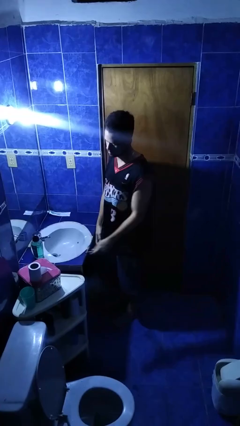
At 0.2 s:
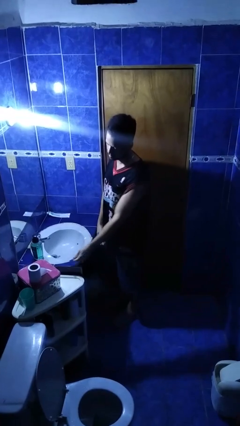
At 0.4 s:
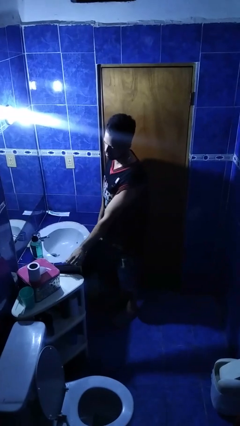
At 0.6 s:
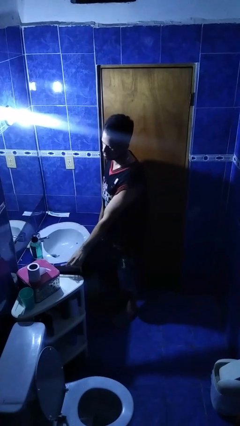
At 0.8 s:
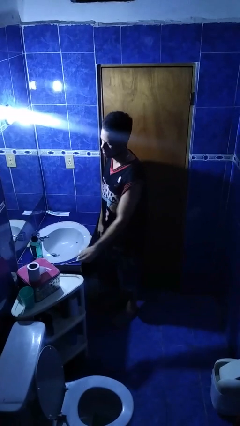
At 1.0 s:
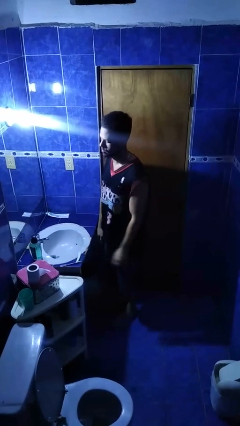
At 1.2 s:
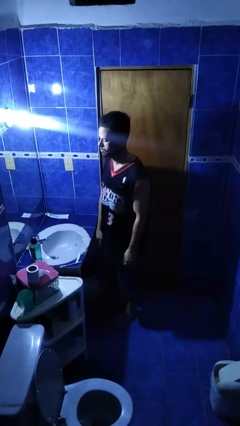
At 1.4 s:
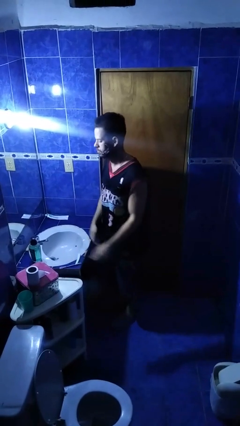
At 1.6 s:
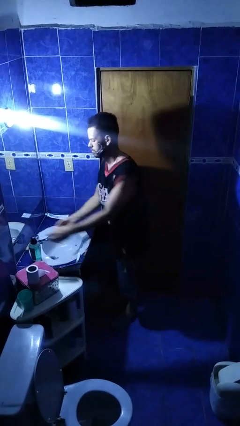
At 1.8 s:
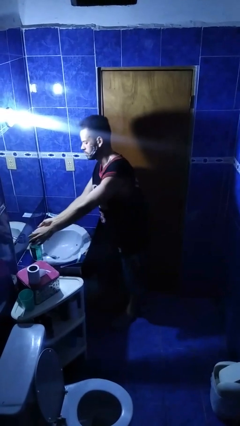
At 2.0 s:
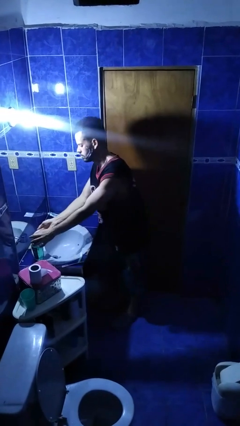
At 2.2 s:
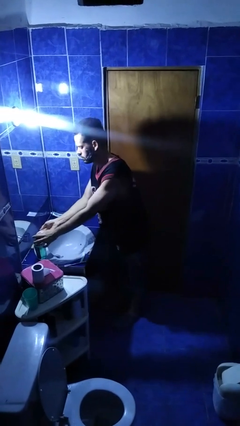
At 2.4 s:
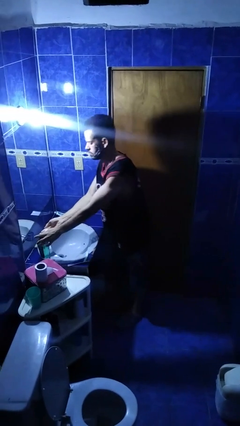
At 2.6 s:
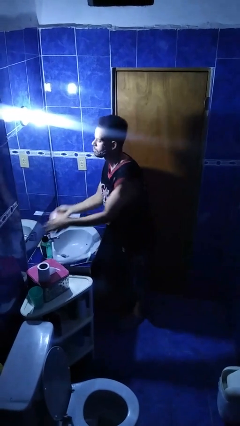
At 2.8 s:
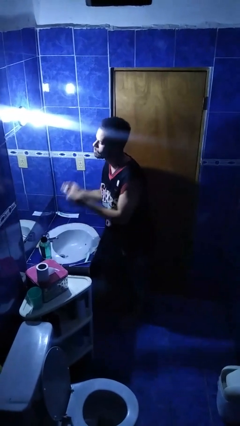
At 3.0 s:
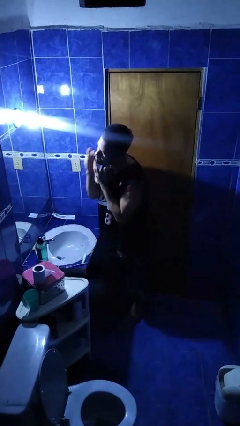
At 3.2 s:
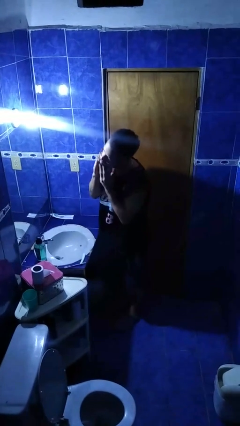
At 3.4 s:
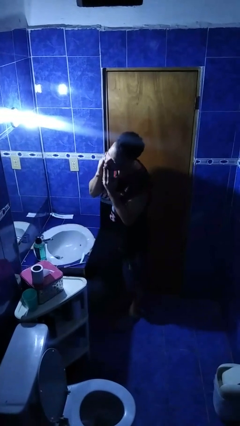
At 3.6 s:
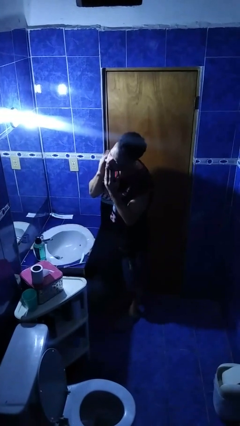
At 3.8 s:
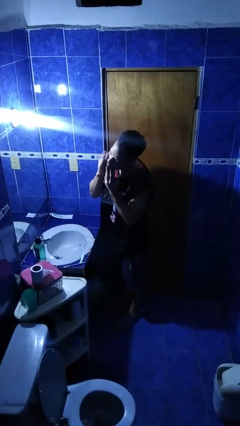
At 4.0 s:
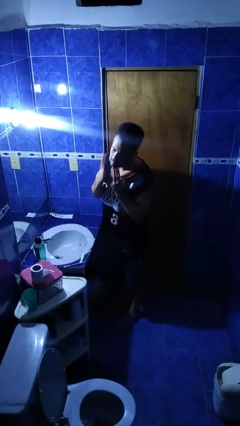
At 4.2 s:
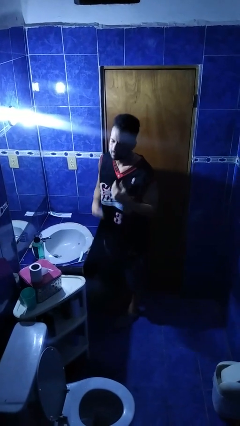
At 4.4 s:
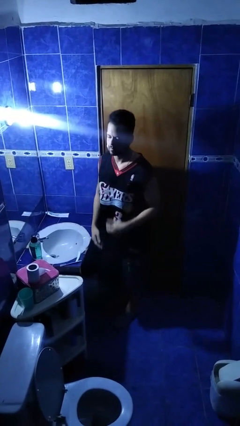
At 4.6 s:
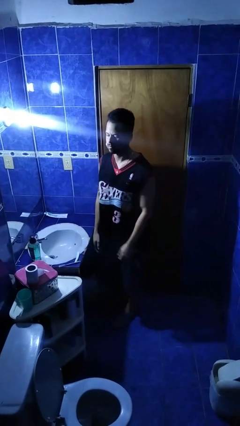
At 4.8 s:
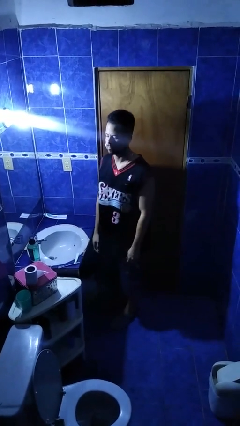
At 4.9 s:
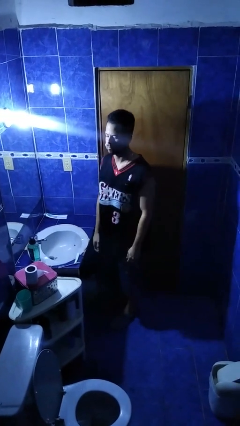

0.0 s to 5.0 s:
person applies shaving cream

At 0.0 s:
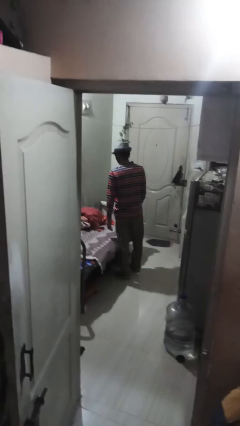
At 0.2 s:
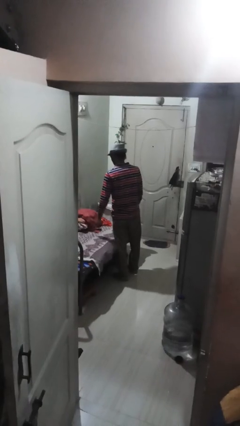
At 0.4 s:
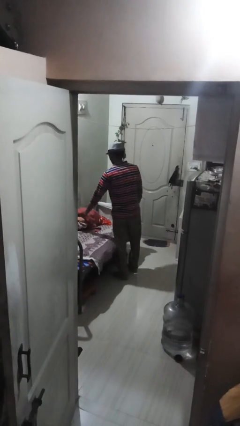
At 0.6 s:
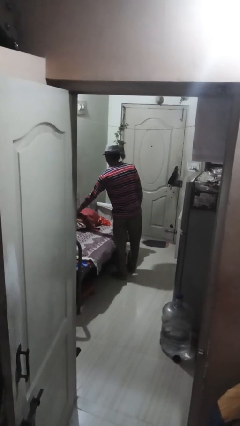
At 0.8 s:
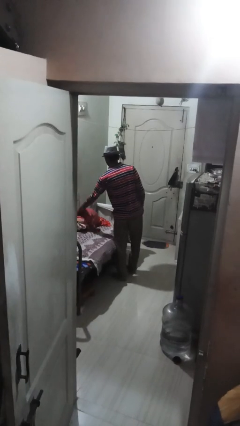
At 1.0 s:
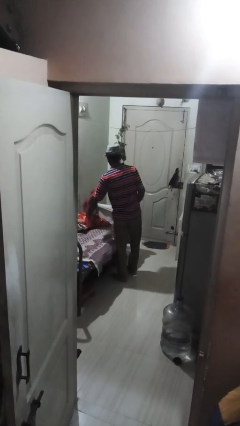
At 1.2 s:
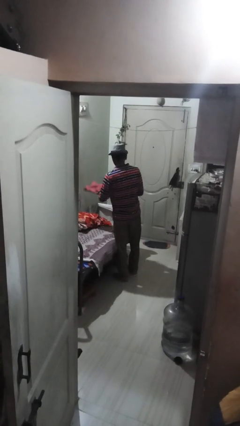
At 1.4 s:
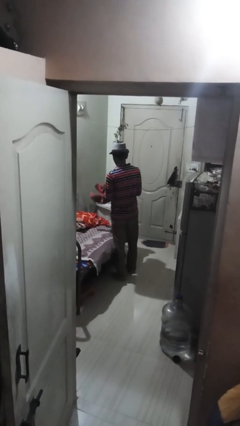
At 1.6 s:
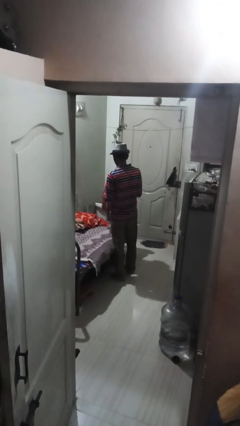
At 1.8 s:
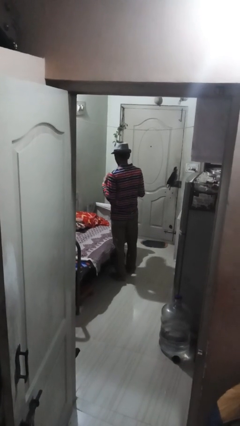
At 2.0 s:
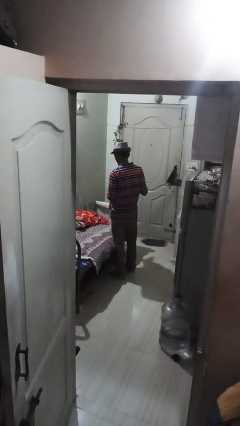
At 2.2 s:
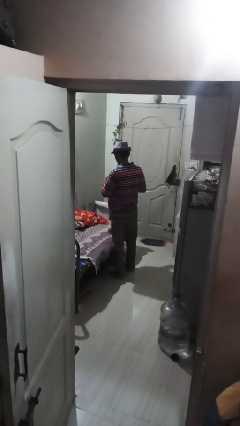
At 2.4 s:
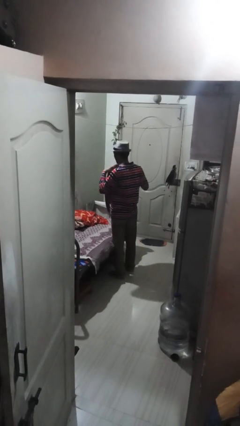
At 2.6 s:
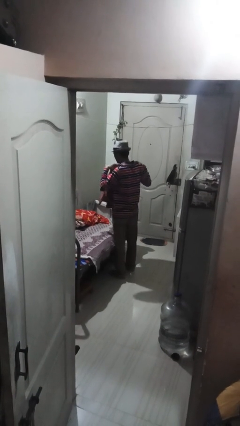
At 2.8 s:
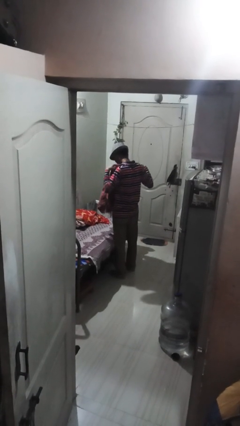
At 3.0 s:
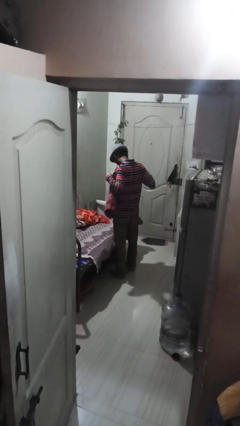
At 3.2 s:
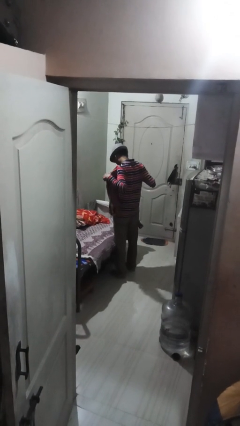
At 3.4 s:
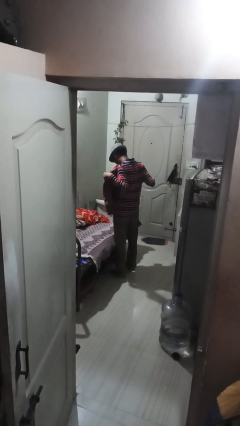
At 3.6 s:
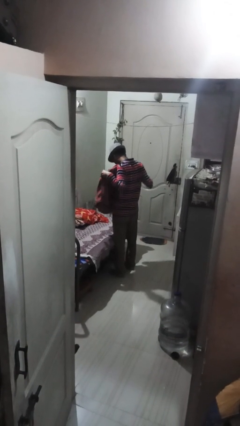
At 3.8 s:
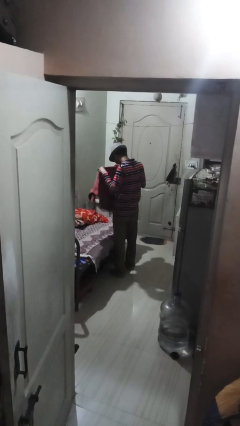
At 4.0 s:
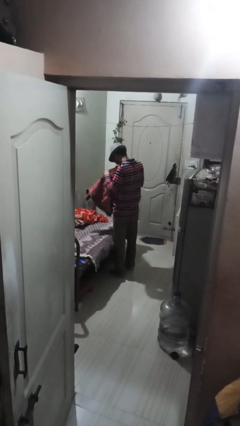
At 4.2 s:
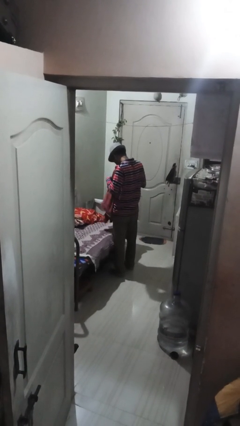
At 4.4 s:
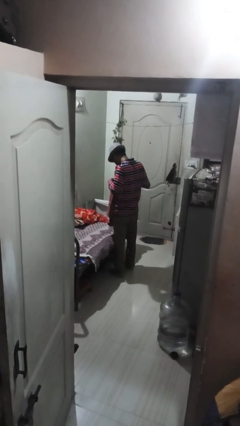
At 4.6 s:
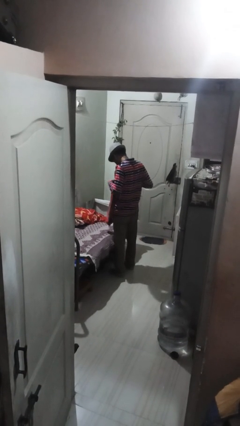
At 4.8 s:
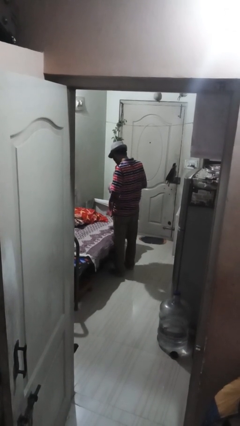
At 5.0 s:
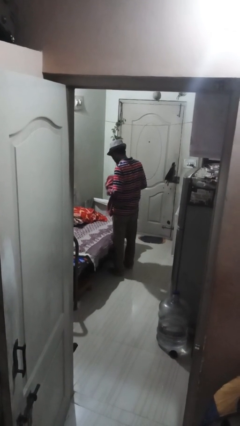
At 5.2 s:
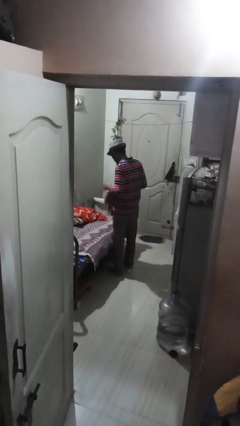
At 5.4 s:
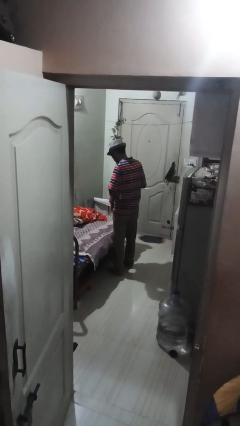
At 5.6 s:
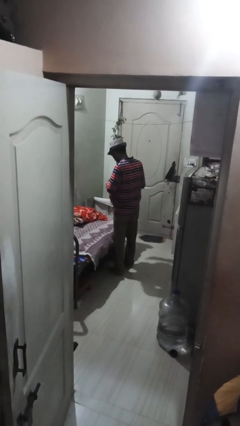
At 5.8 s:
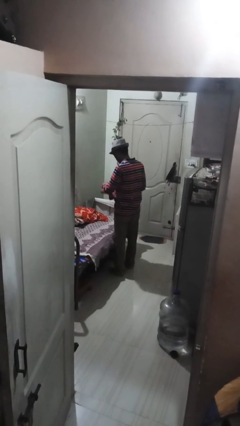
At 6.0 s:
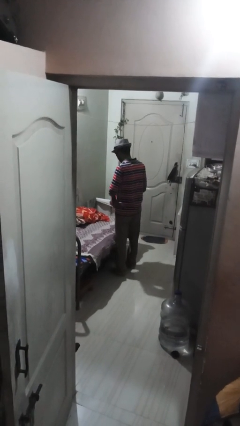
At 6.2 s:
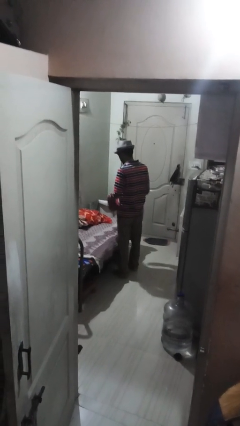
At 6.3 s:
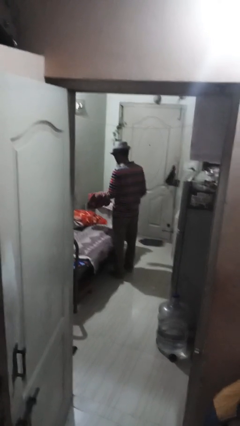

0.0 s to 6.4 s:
person folds shirt

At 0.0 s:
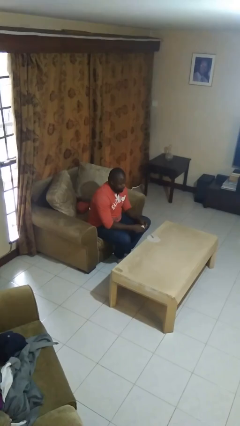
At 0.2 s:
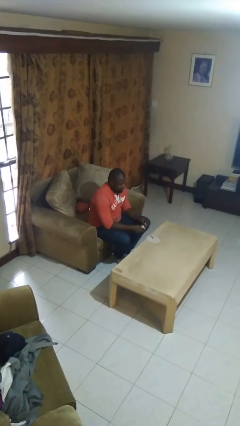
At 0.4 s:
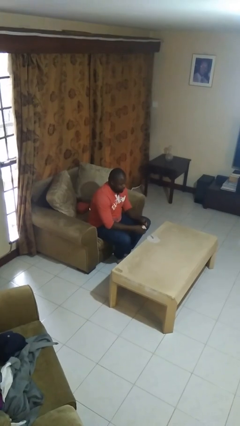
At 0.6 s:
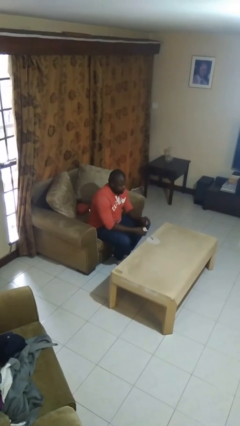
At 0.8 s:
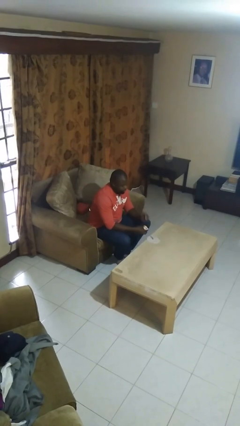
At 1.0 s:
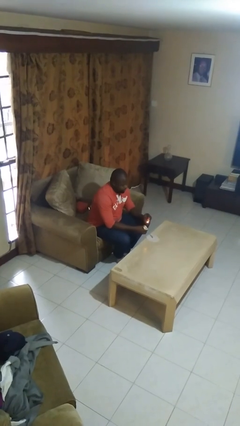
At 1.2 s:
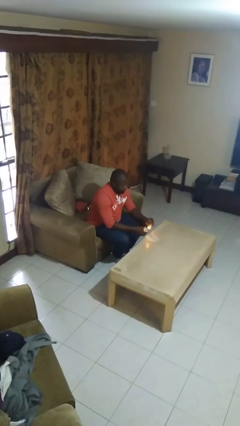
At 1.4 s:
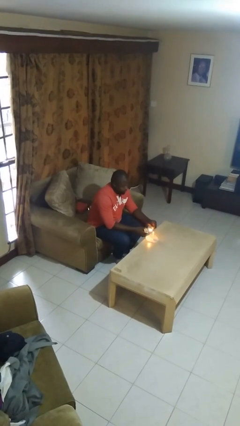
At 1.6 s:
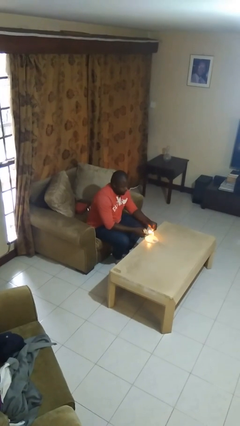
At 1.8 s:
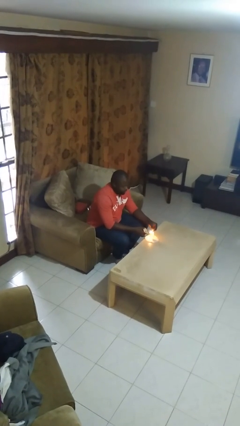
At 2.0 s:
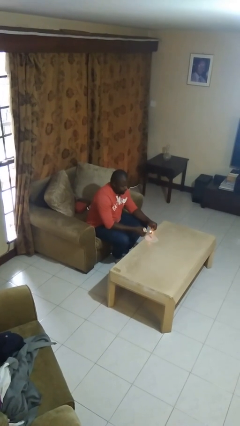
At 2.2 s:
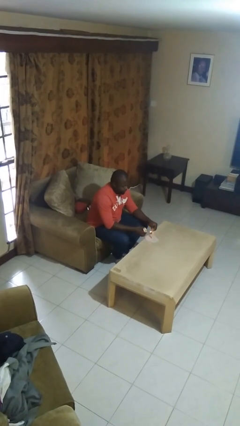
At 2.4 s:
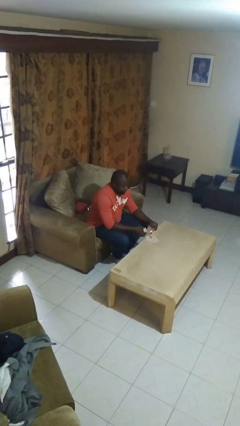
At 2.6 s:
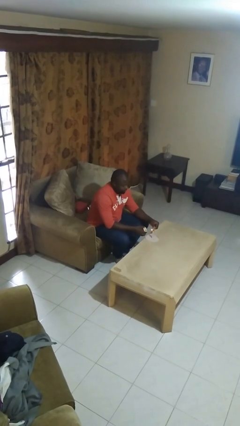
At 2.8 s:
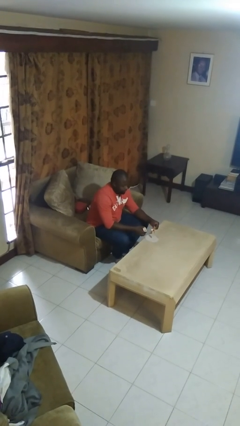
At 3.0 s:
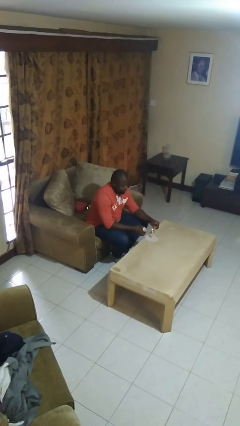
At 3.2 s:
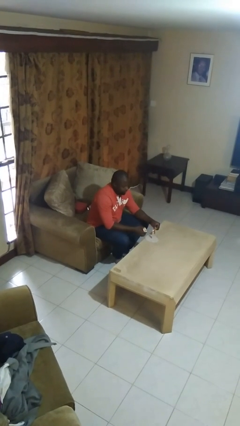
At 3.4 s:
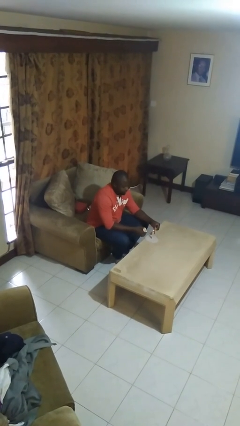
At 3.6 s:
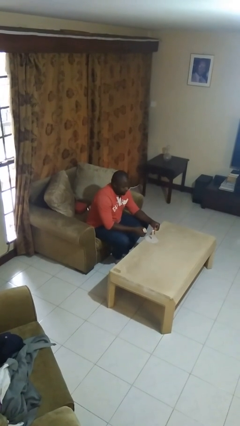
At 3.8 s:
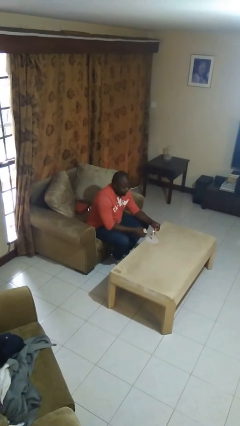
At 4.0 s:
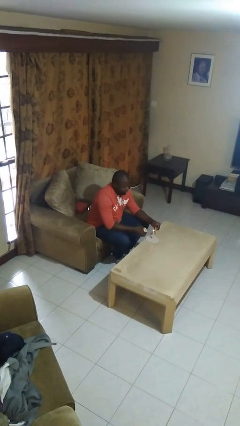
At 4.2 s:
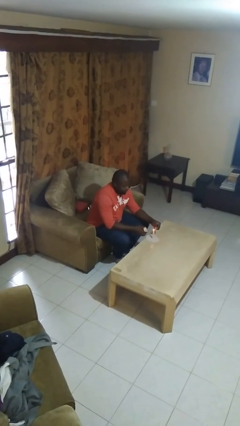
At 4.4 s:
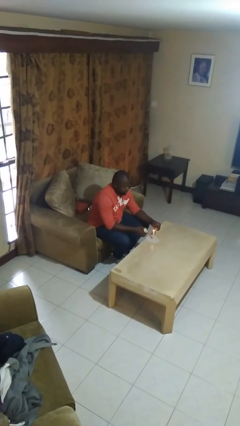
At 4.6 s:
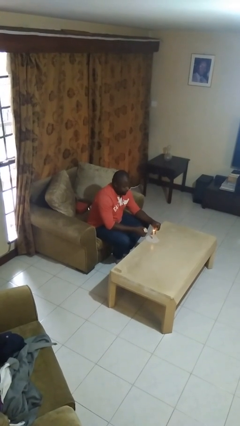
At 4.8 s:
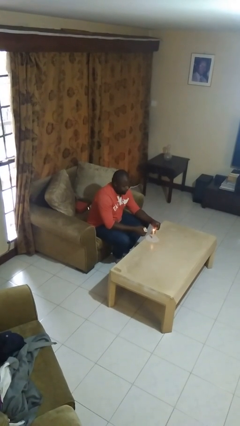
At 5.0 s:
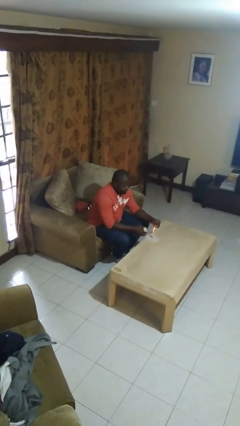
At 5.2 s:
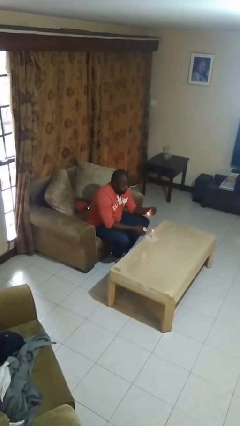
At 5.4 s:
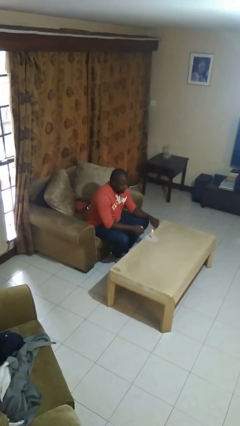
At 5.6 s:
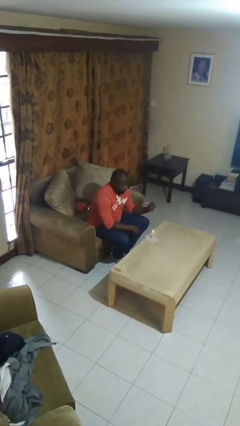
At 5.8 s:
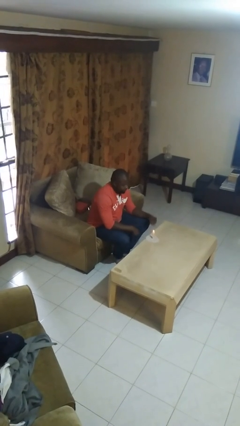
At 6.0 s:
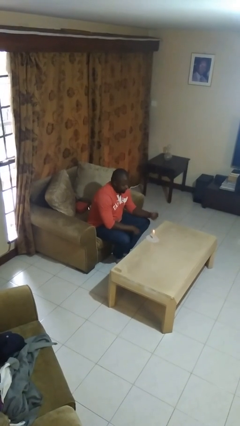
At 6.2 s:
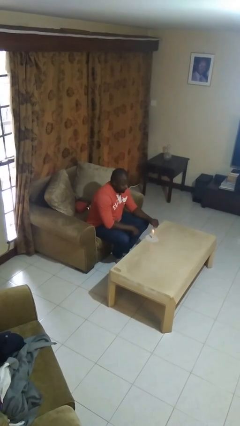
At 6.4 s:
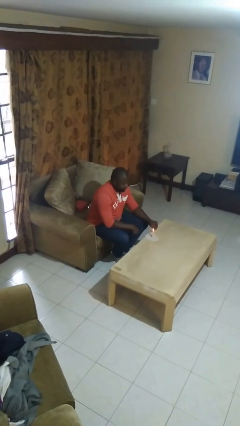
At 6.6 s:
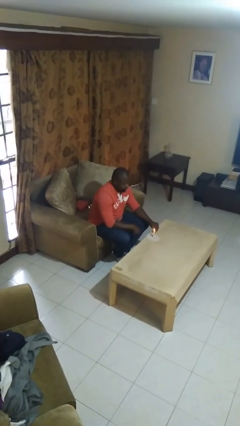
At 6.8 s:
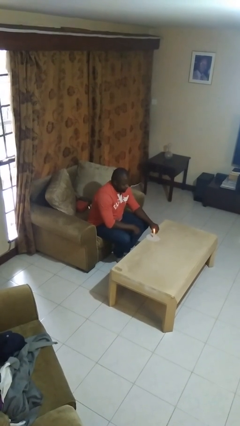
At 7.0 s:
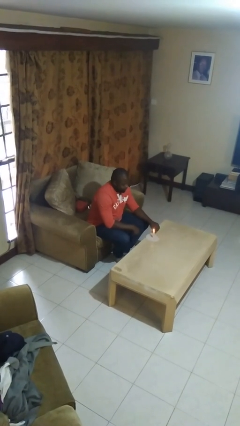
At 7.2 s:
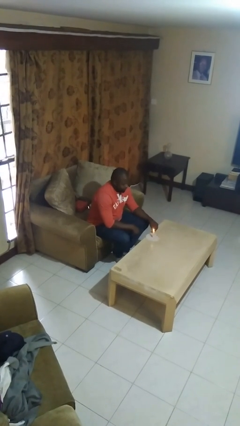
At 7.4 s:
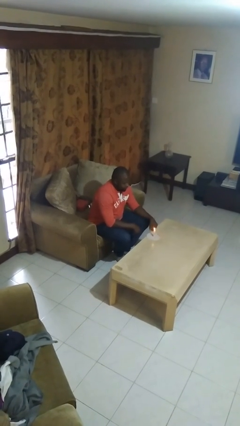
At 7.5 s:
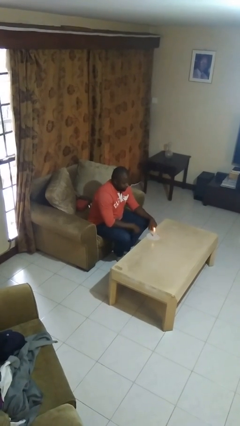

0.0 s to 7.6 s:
person lights candle
